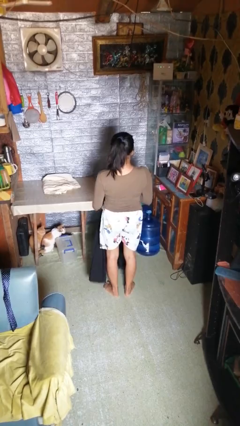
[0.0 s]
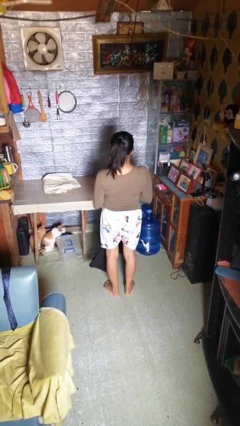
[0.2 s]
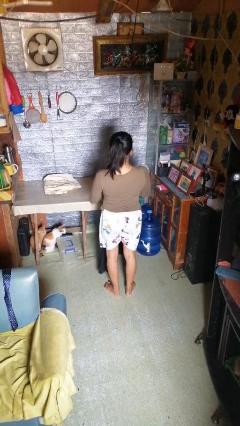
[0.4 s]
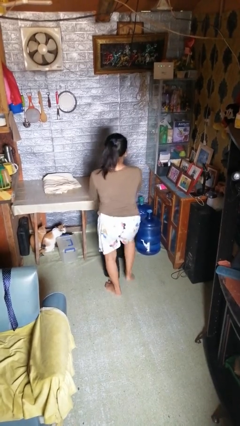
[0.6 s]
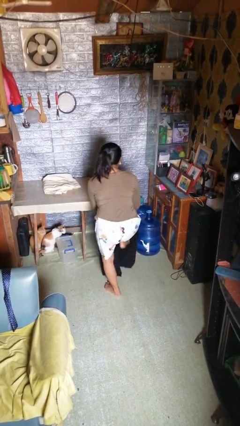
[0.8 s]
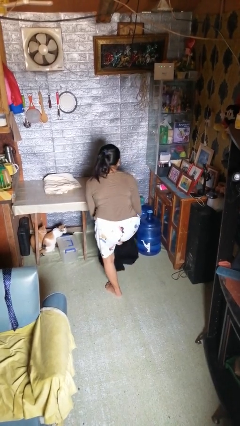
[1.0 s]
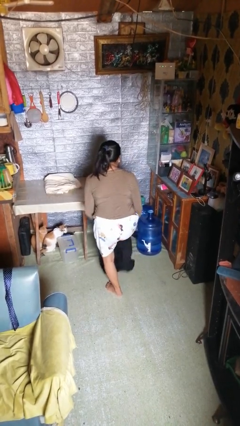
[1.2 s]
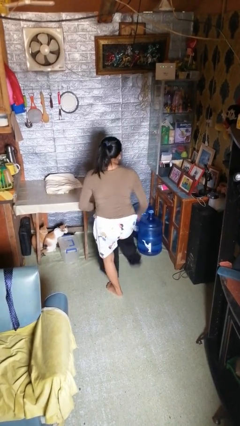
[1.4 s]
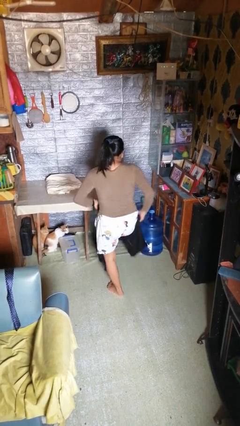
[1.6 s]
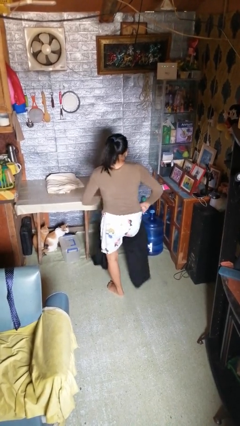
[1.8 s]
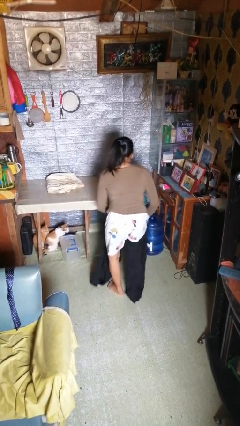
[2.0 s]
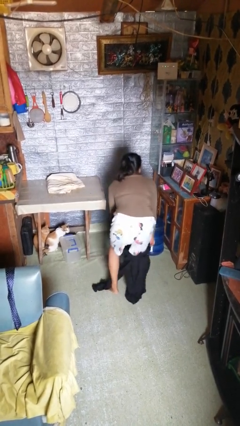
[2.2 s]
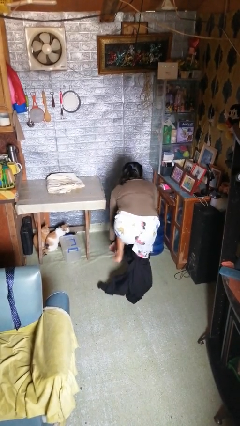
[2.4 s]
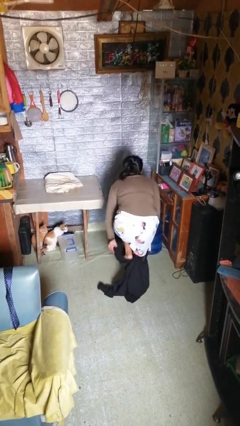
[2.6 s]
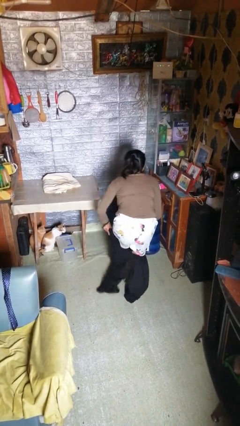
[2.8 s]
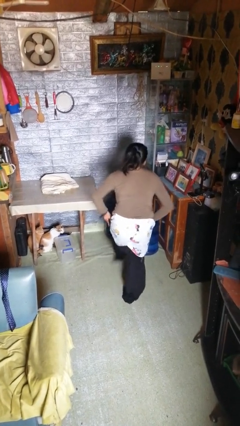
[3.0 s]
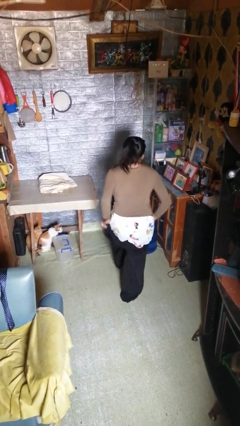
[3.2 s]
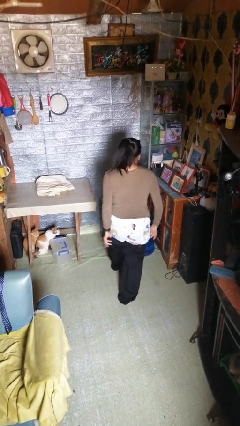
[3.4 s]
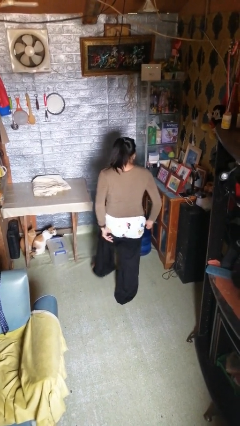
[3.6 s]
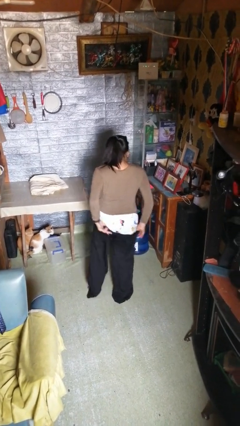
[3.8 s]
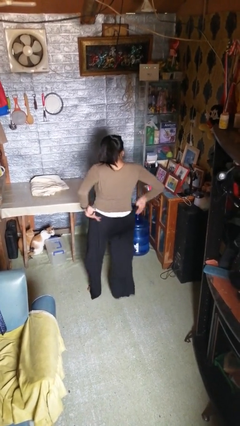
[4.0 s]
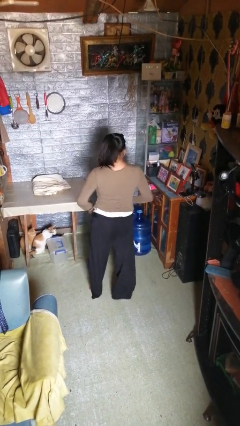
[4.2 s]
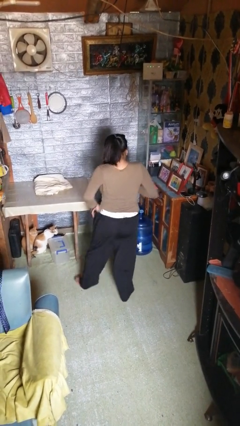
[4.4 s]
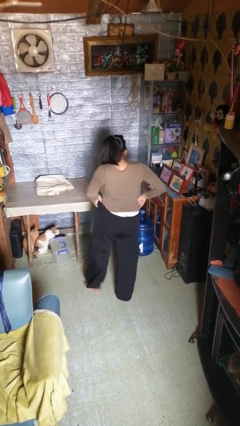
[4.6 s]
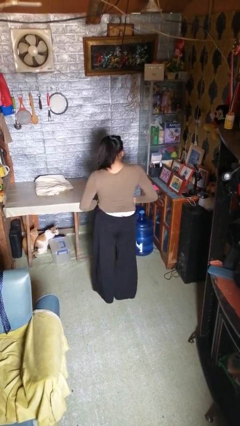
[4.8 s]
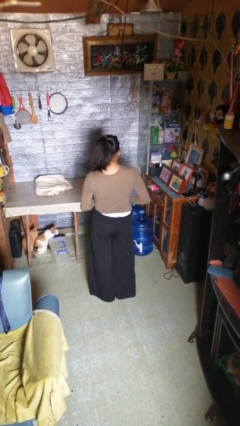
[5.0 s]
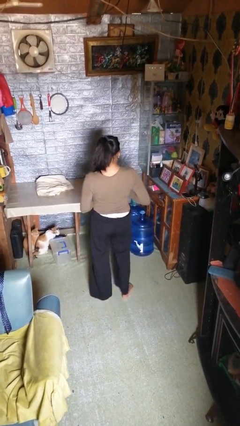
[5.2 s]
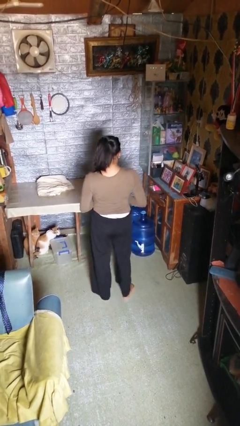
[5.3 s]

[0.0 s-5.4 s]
person puts on pants

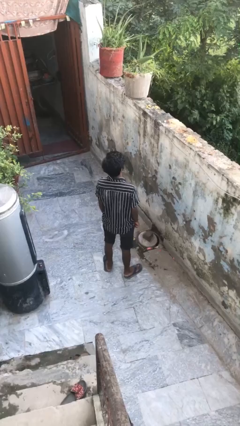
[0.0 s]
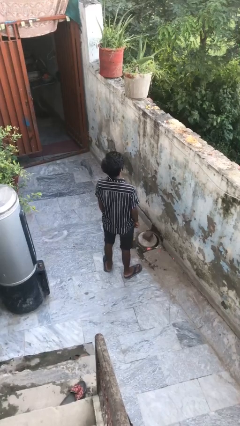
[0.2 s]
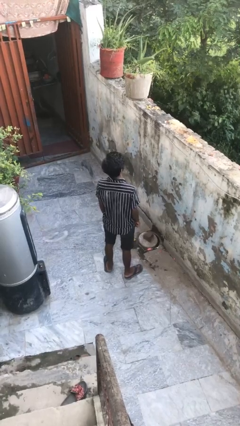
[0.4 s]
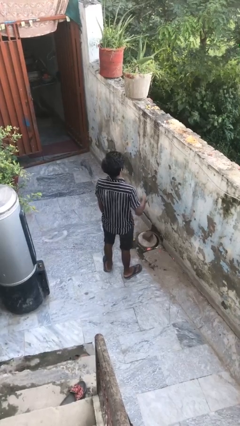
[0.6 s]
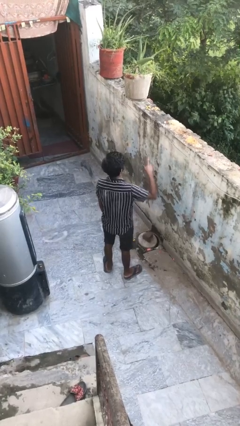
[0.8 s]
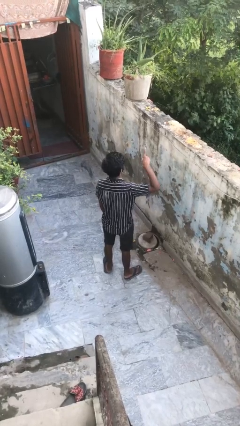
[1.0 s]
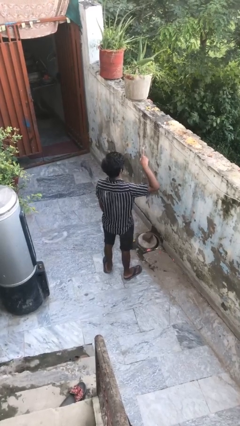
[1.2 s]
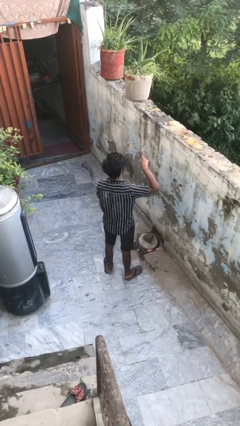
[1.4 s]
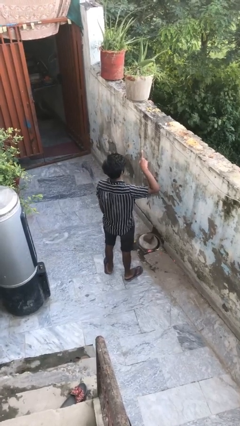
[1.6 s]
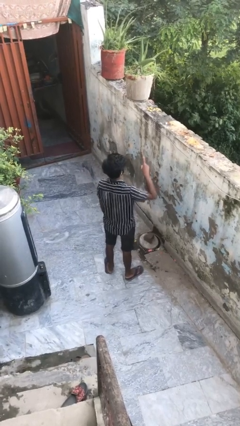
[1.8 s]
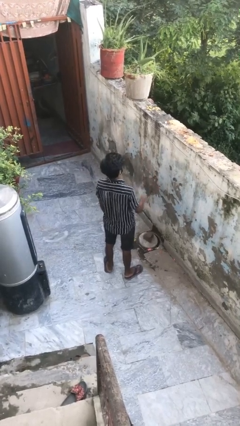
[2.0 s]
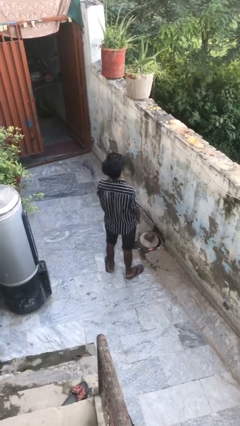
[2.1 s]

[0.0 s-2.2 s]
person gestures number one

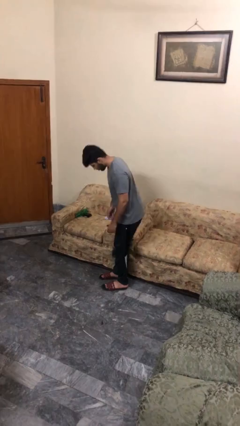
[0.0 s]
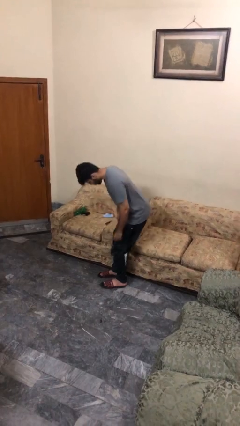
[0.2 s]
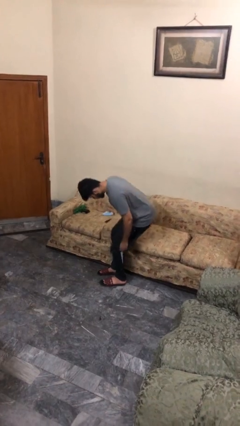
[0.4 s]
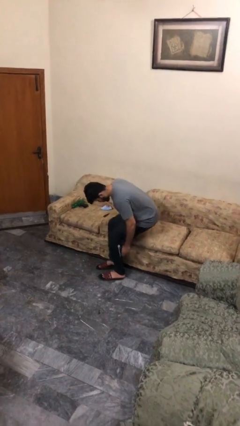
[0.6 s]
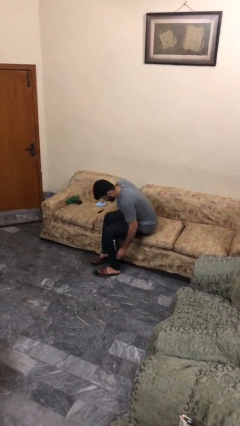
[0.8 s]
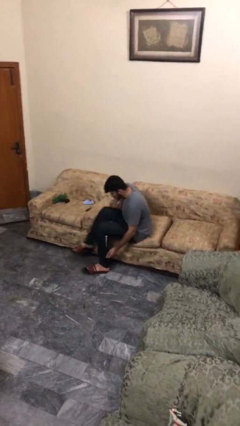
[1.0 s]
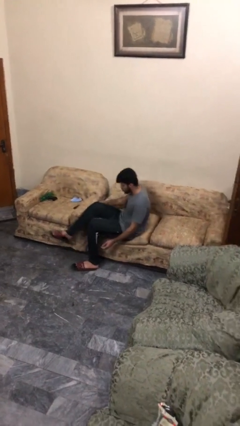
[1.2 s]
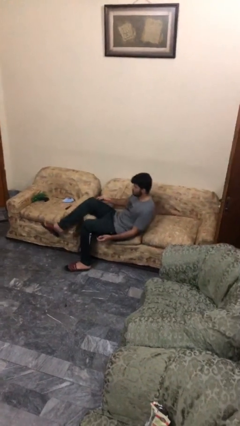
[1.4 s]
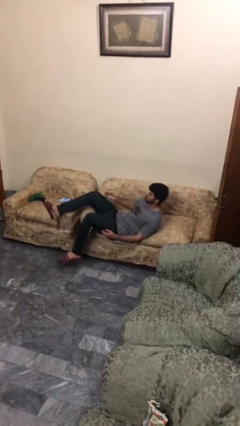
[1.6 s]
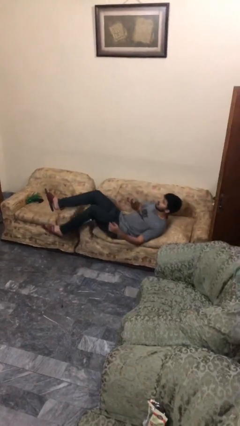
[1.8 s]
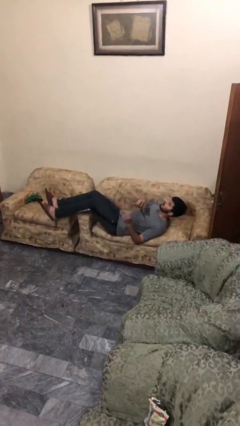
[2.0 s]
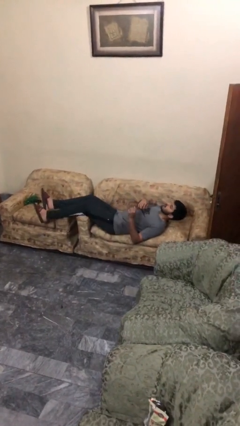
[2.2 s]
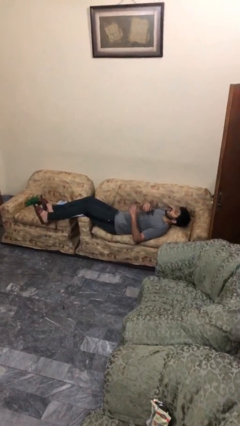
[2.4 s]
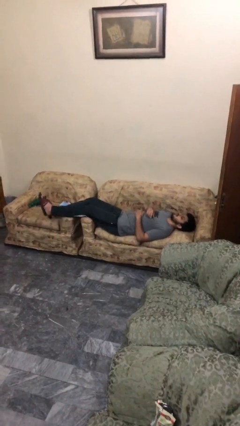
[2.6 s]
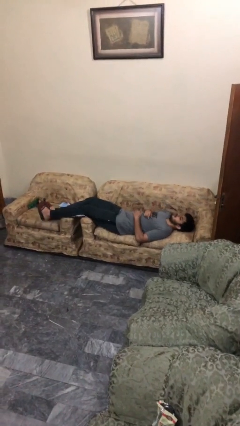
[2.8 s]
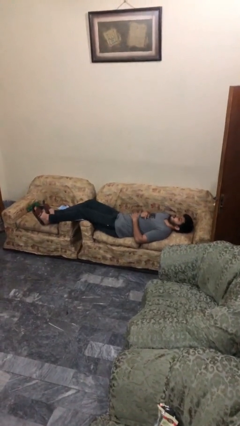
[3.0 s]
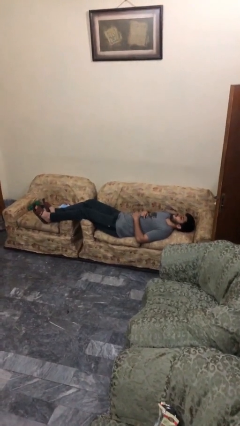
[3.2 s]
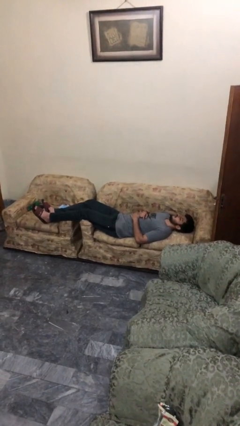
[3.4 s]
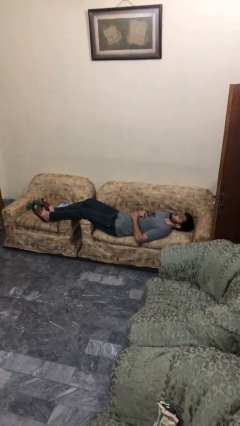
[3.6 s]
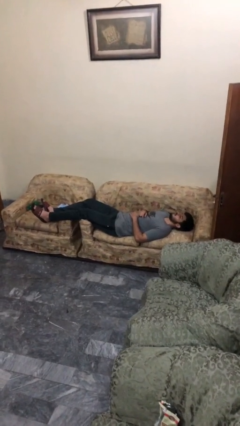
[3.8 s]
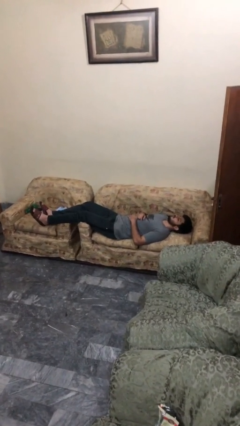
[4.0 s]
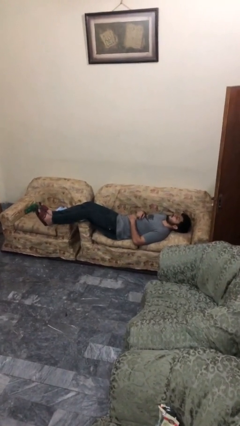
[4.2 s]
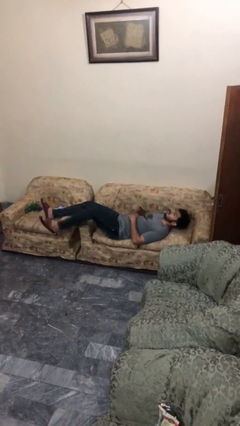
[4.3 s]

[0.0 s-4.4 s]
person lies down on couch

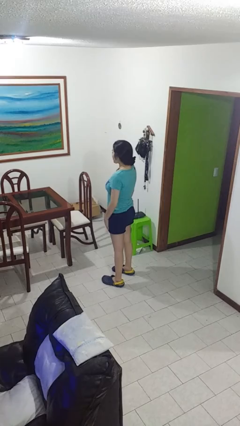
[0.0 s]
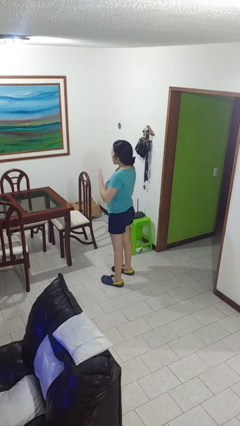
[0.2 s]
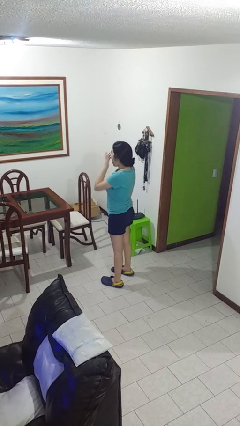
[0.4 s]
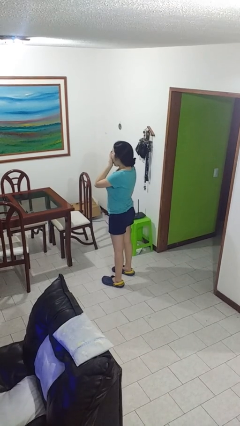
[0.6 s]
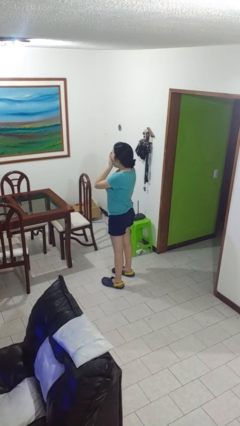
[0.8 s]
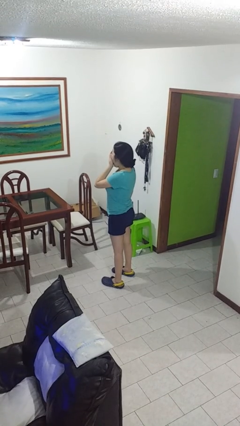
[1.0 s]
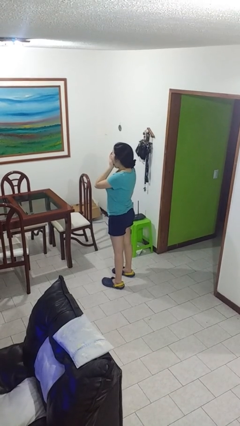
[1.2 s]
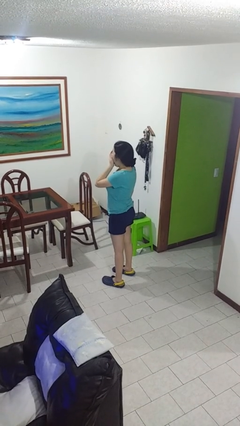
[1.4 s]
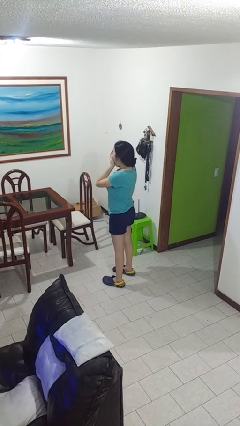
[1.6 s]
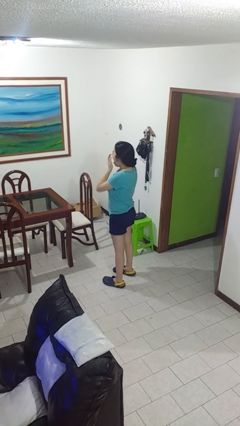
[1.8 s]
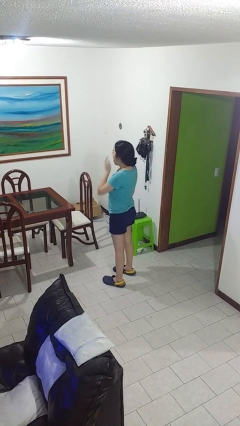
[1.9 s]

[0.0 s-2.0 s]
person yawns

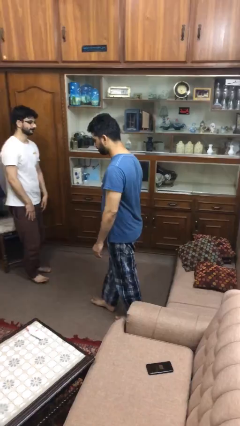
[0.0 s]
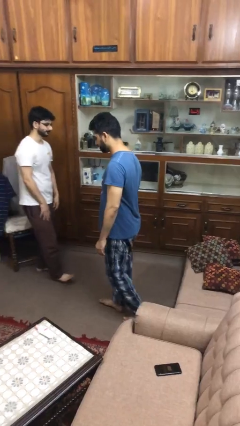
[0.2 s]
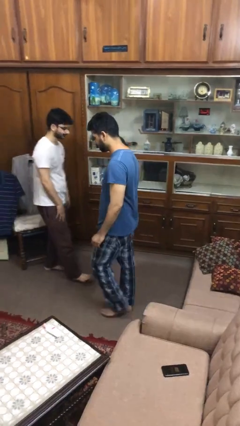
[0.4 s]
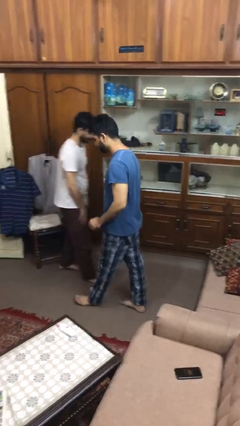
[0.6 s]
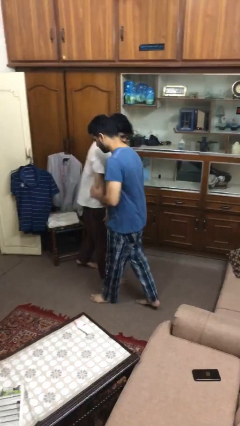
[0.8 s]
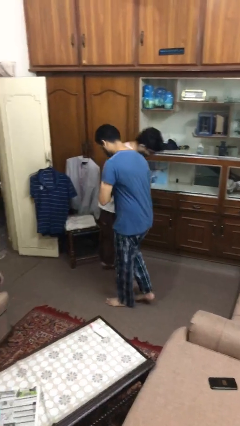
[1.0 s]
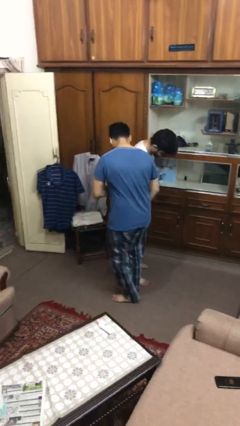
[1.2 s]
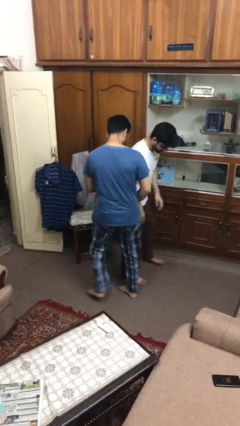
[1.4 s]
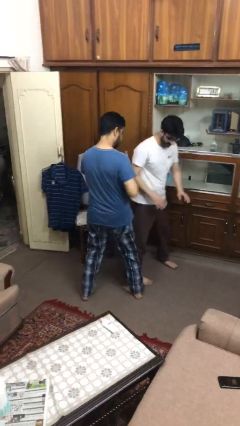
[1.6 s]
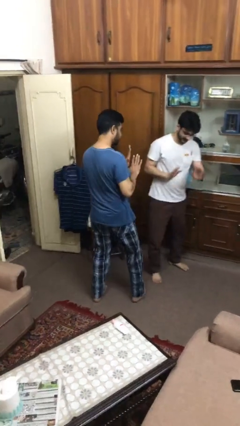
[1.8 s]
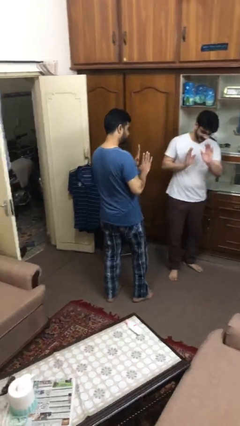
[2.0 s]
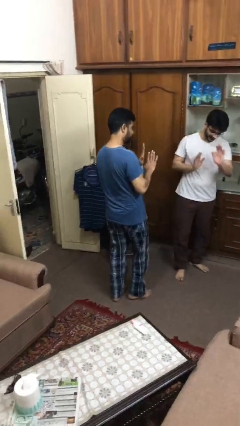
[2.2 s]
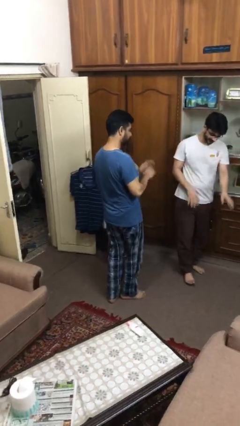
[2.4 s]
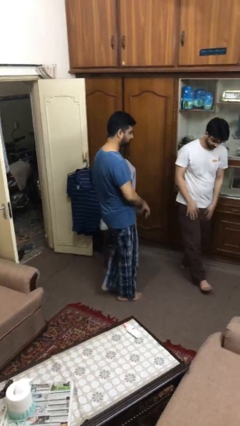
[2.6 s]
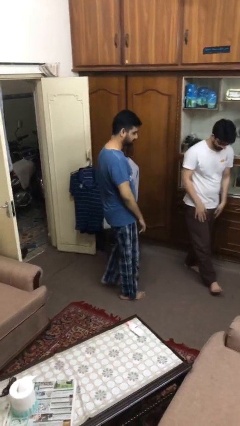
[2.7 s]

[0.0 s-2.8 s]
person bumps into person

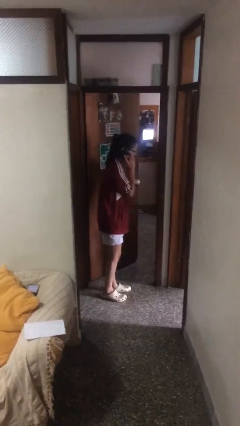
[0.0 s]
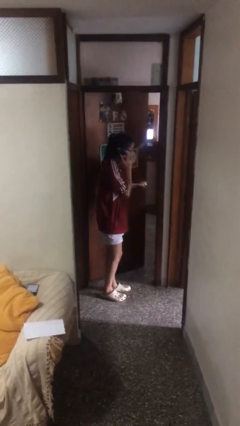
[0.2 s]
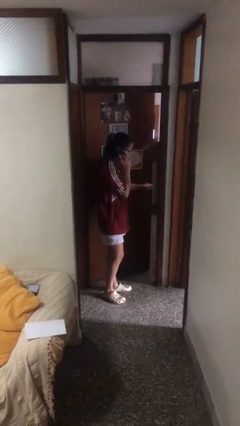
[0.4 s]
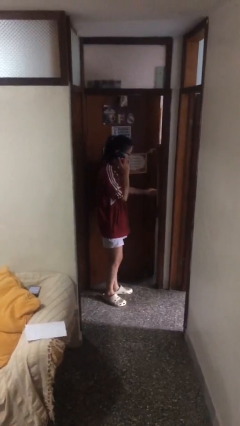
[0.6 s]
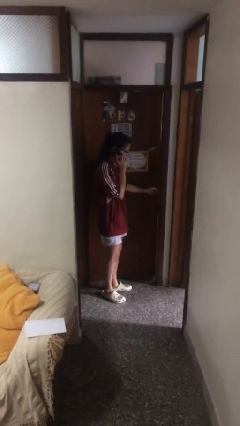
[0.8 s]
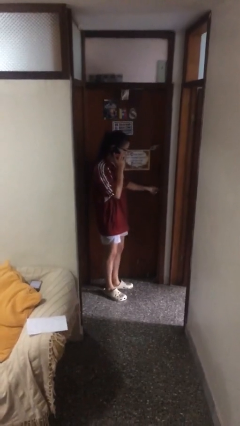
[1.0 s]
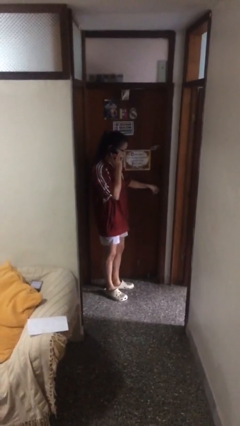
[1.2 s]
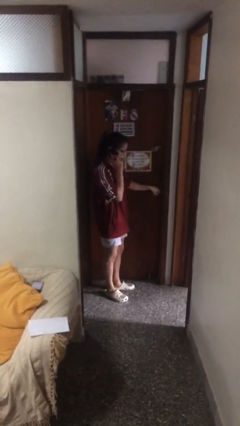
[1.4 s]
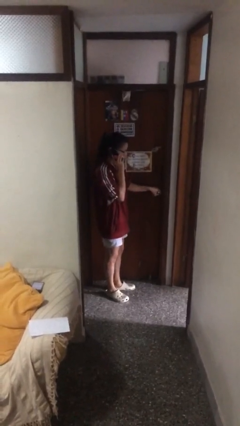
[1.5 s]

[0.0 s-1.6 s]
person closes facility door
